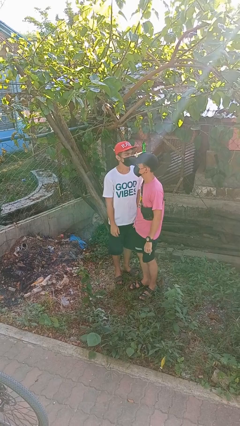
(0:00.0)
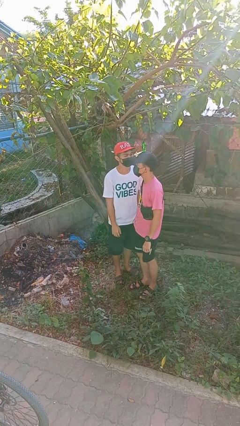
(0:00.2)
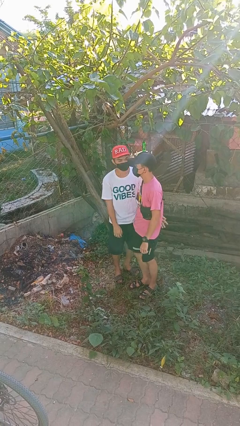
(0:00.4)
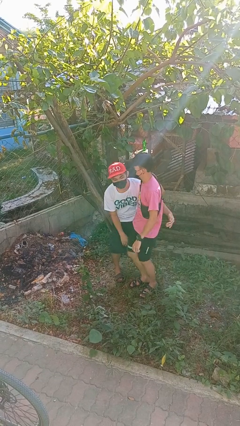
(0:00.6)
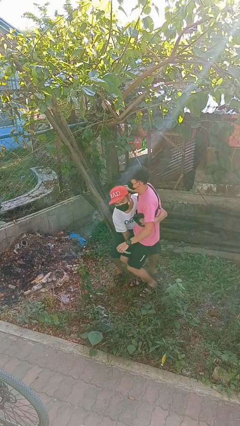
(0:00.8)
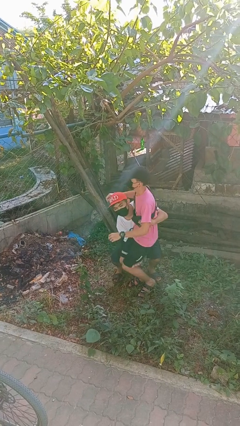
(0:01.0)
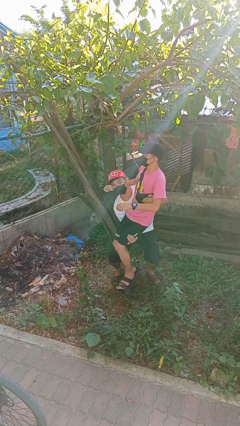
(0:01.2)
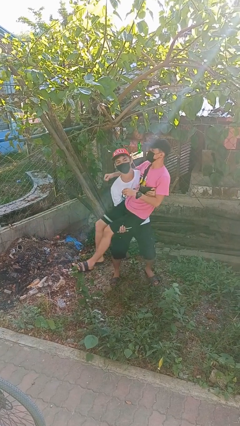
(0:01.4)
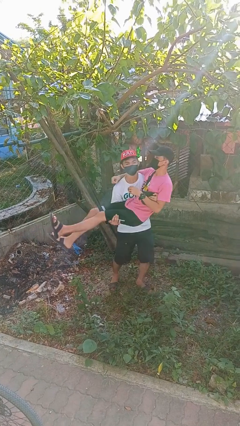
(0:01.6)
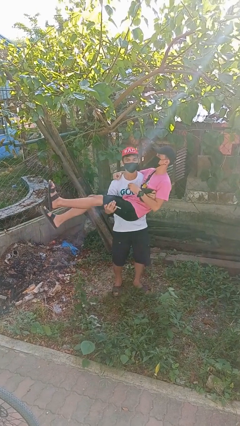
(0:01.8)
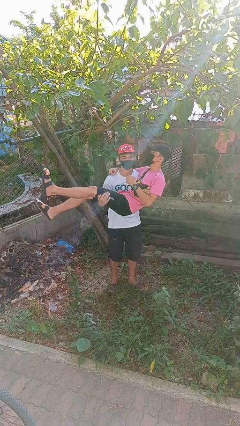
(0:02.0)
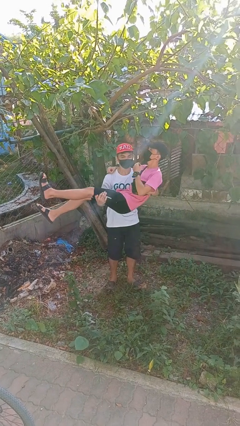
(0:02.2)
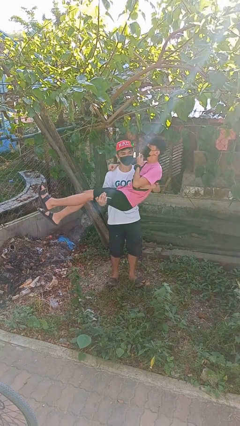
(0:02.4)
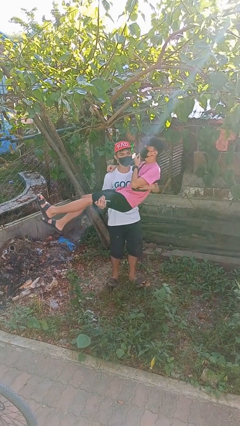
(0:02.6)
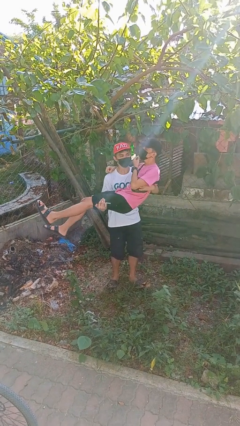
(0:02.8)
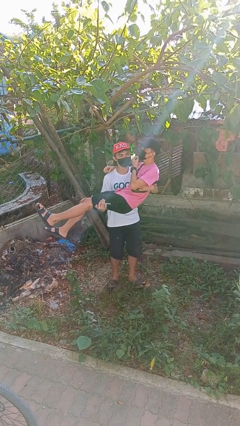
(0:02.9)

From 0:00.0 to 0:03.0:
person picks up person

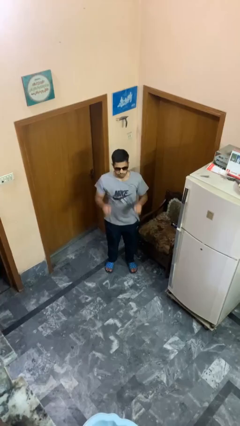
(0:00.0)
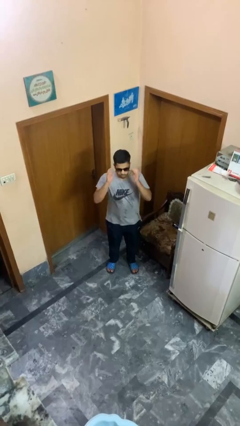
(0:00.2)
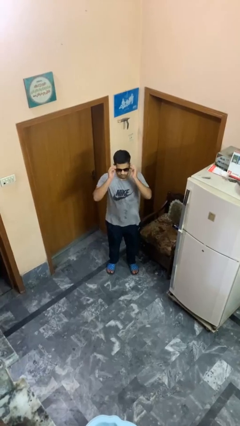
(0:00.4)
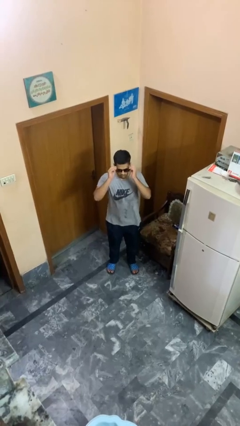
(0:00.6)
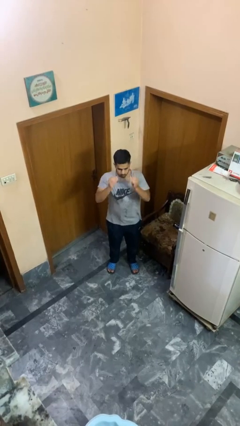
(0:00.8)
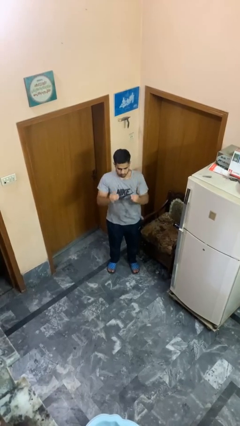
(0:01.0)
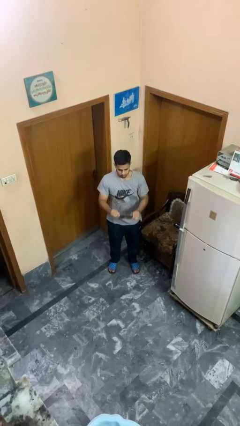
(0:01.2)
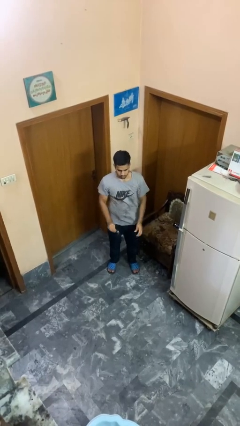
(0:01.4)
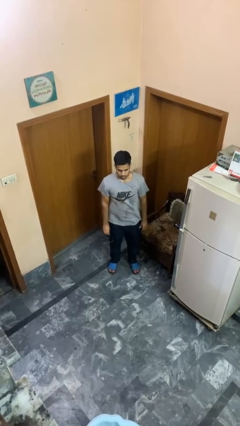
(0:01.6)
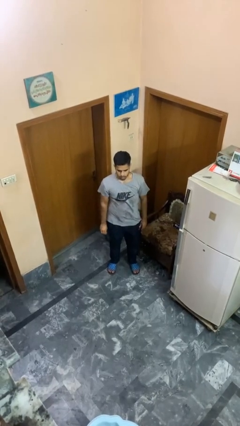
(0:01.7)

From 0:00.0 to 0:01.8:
person takes off sunglasses

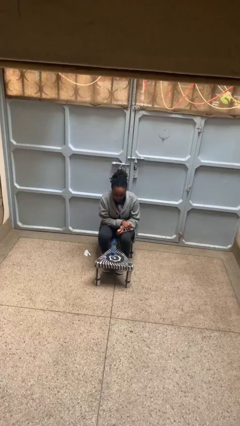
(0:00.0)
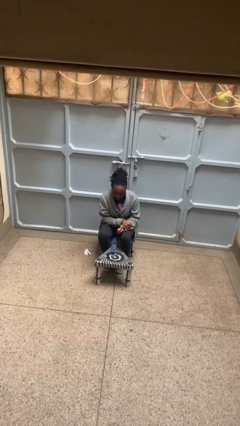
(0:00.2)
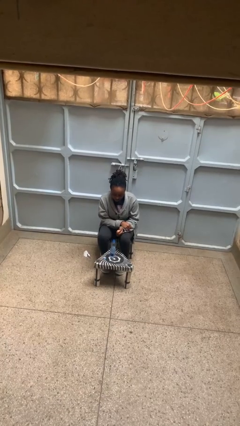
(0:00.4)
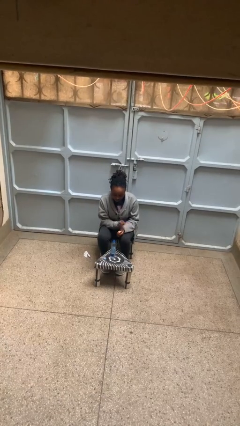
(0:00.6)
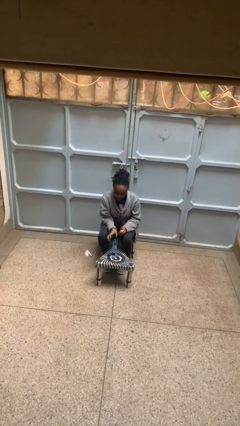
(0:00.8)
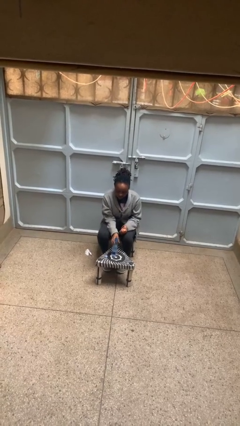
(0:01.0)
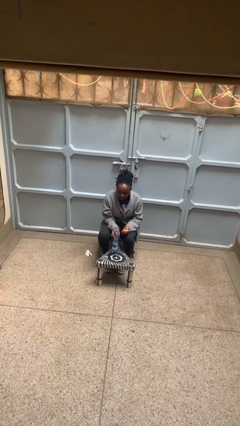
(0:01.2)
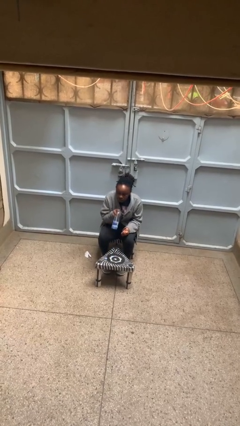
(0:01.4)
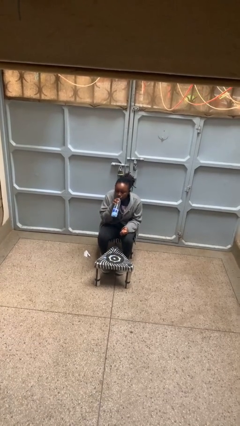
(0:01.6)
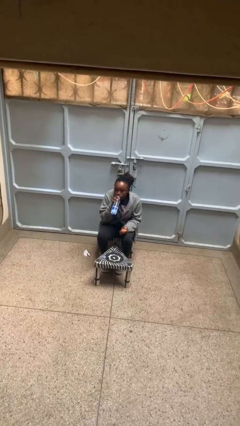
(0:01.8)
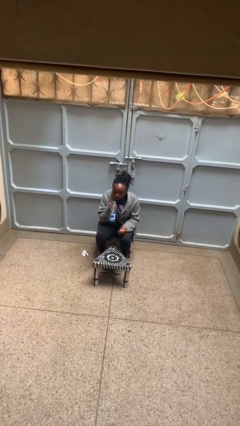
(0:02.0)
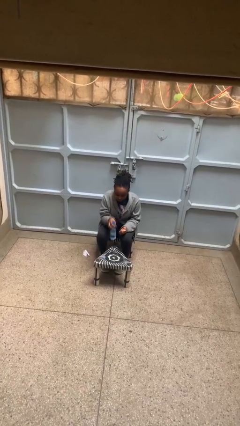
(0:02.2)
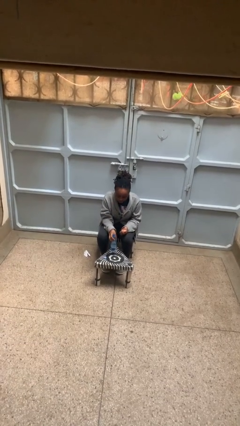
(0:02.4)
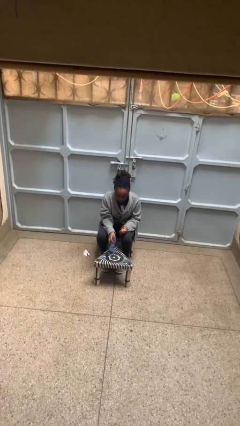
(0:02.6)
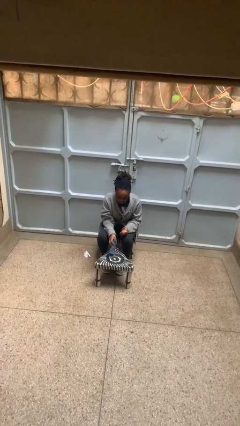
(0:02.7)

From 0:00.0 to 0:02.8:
person drinks from cup

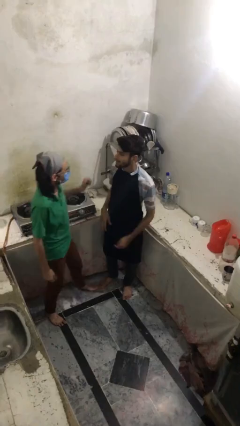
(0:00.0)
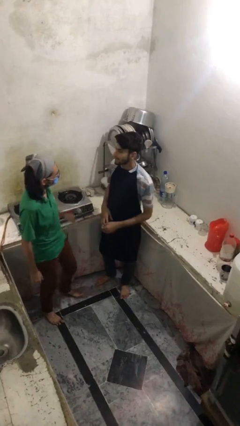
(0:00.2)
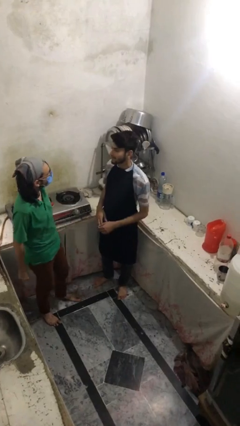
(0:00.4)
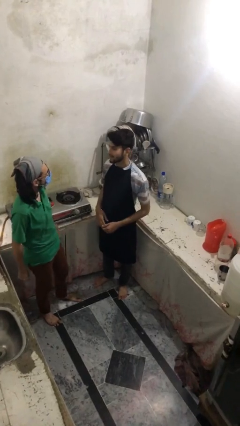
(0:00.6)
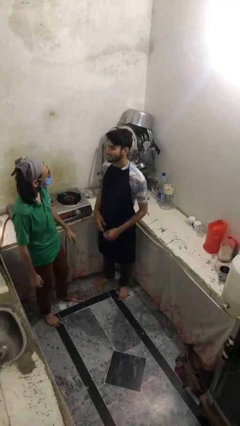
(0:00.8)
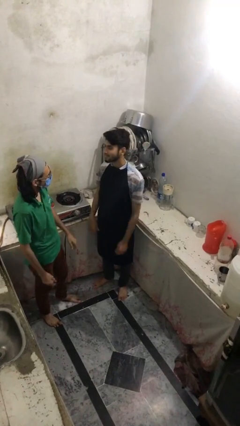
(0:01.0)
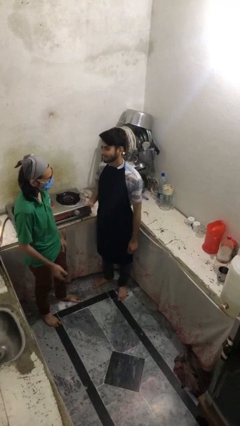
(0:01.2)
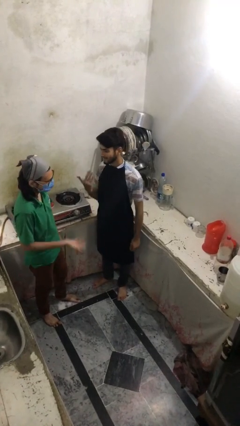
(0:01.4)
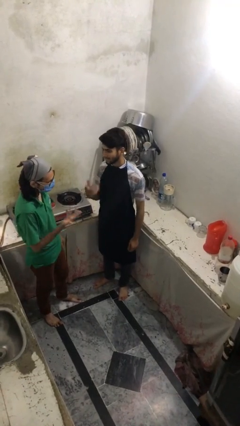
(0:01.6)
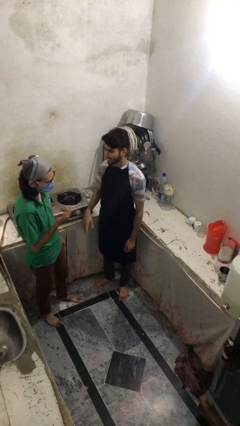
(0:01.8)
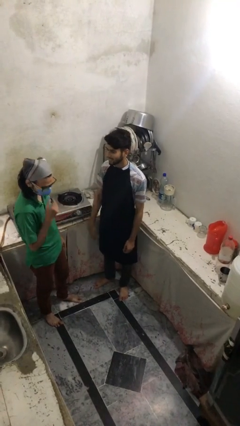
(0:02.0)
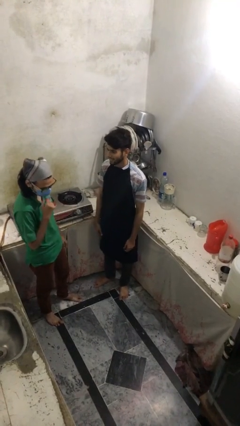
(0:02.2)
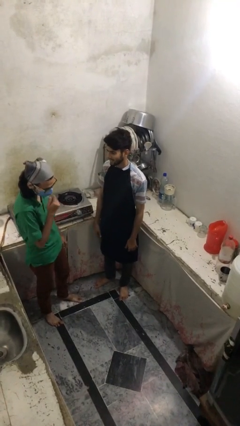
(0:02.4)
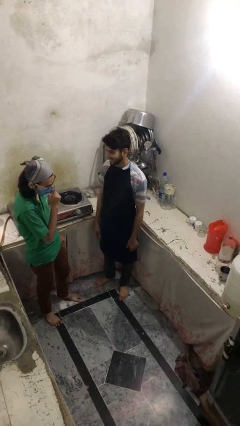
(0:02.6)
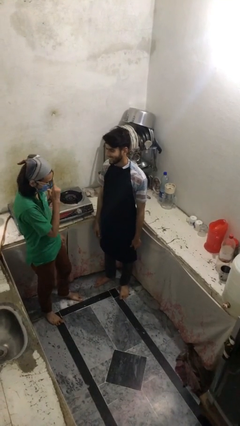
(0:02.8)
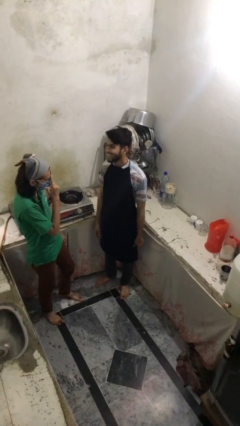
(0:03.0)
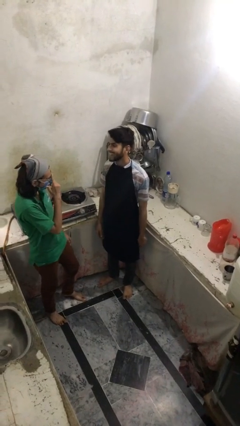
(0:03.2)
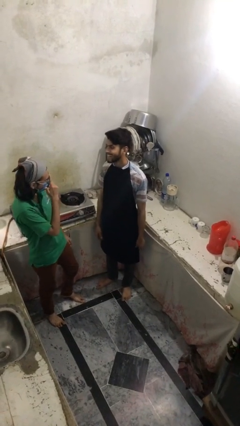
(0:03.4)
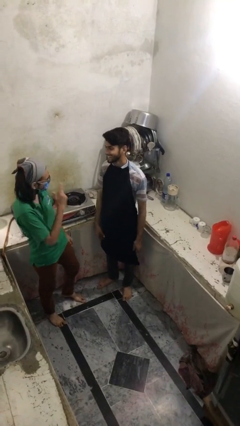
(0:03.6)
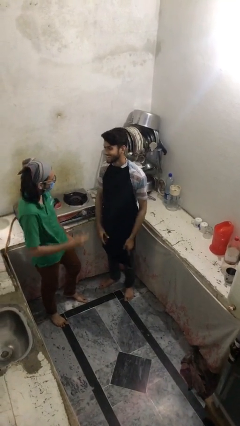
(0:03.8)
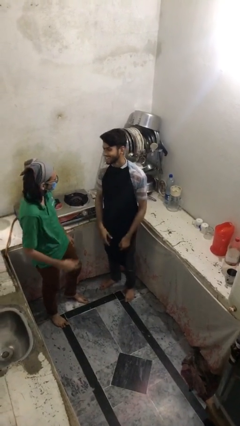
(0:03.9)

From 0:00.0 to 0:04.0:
person talks to person

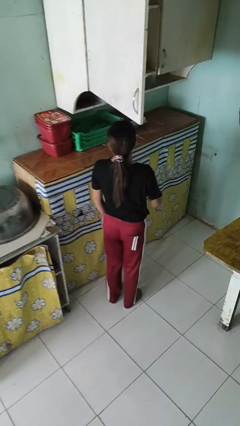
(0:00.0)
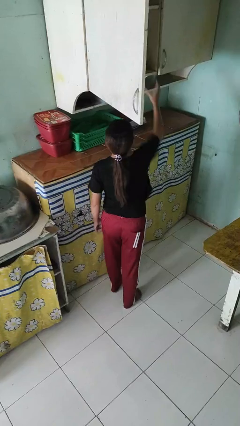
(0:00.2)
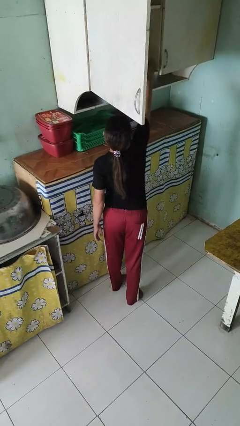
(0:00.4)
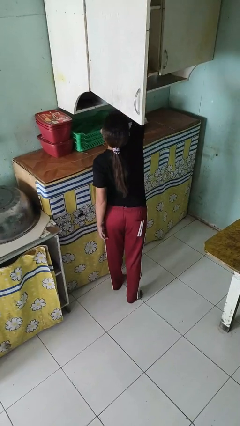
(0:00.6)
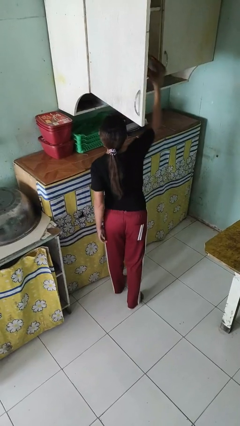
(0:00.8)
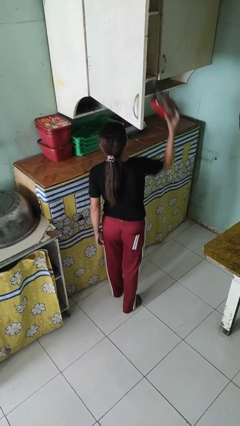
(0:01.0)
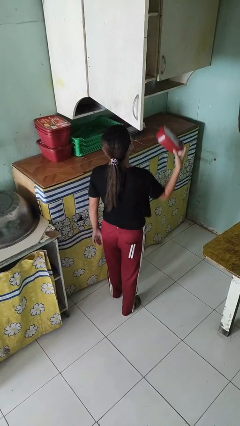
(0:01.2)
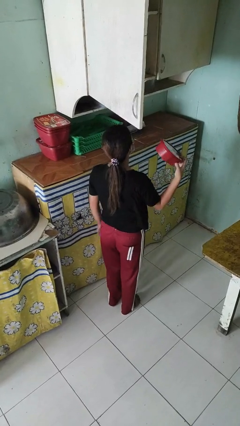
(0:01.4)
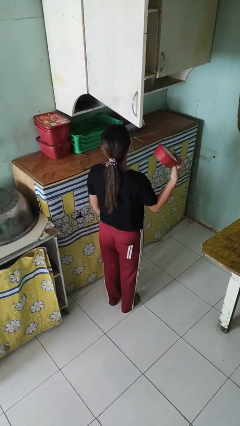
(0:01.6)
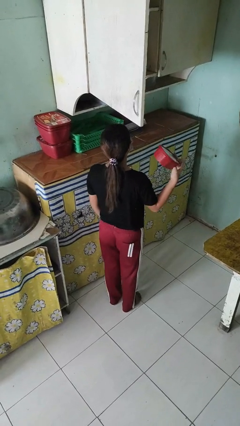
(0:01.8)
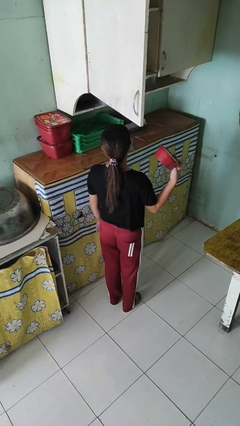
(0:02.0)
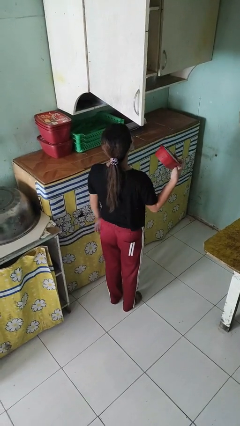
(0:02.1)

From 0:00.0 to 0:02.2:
person takes object from cabinet

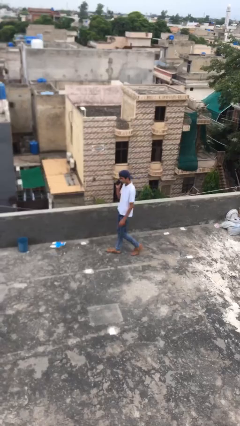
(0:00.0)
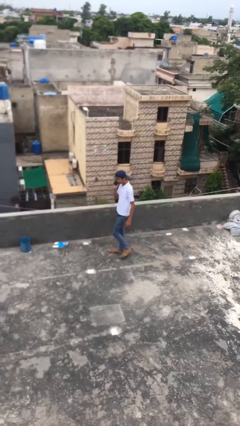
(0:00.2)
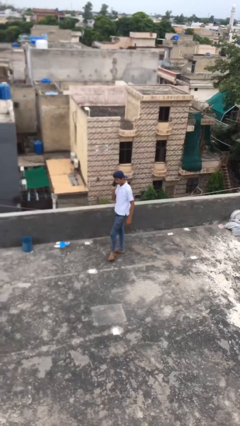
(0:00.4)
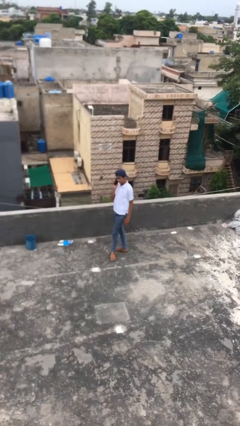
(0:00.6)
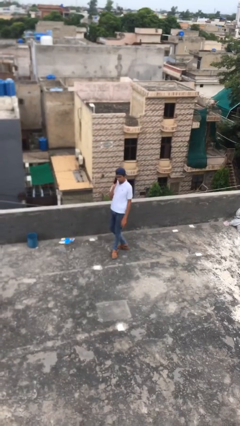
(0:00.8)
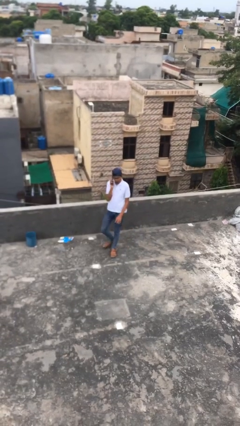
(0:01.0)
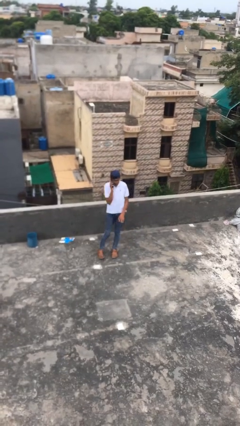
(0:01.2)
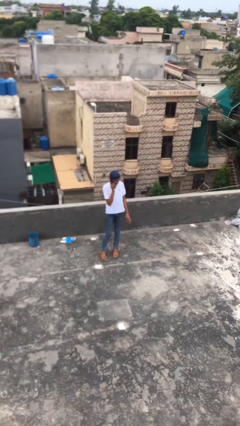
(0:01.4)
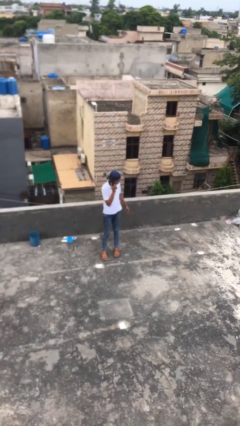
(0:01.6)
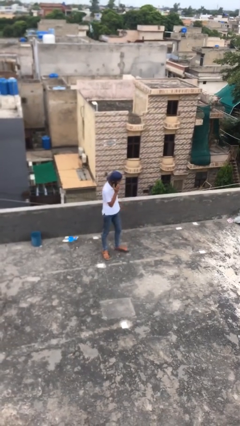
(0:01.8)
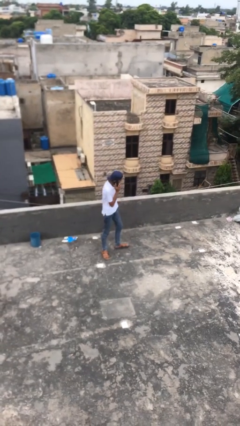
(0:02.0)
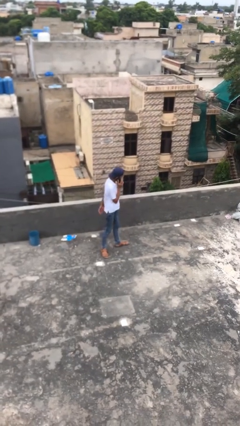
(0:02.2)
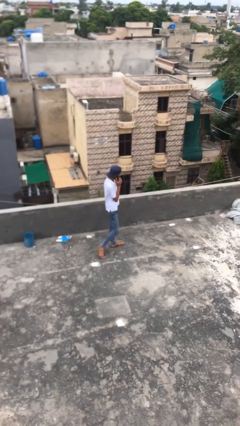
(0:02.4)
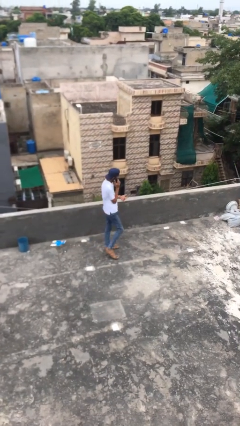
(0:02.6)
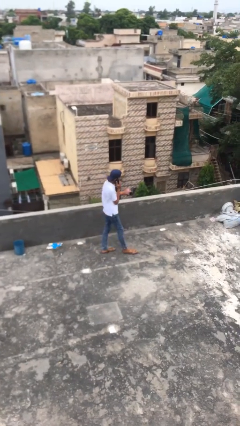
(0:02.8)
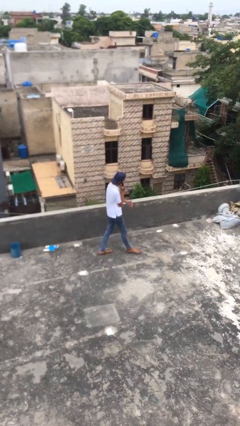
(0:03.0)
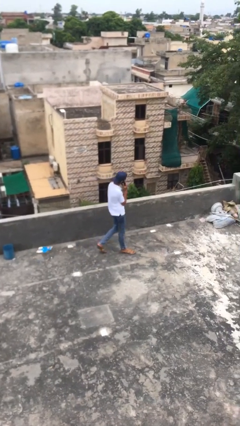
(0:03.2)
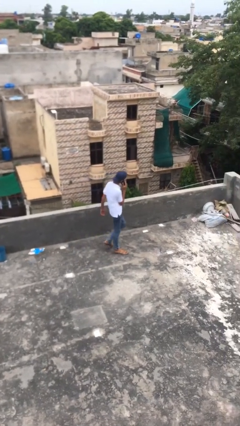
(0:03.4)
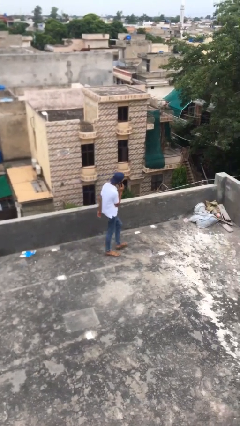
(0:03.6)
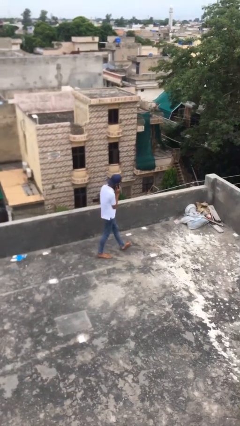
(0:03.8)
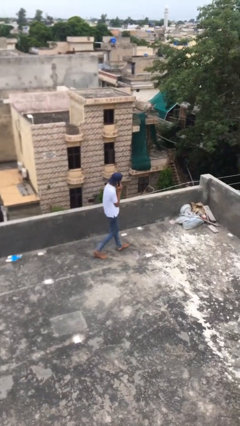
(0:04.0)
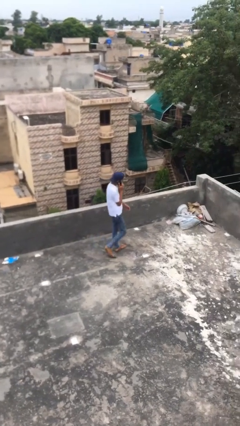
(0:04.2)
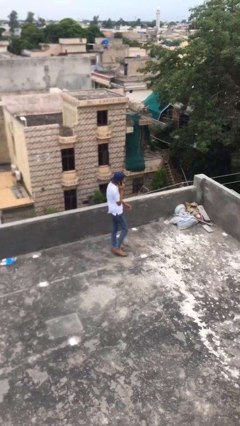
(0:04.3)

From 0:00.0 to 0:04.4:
person talks on phone
